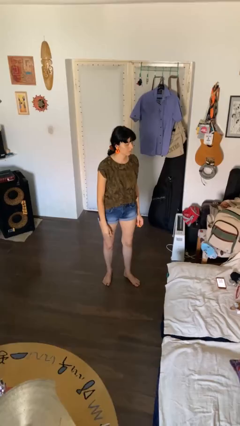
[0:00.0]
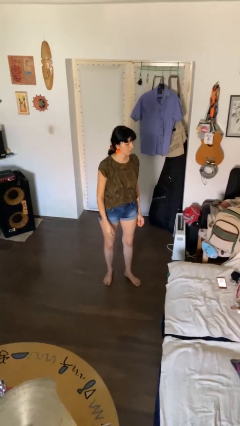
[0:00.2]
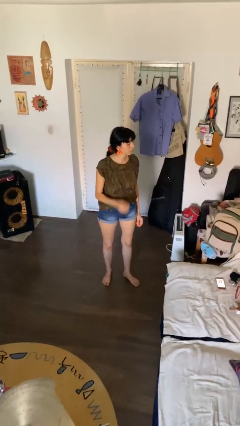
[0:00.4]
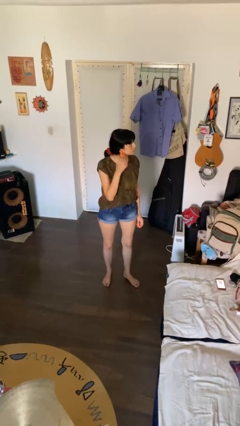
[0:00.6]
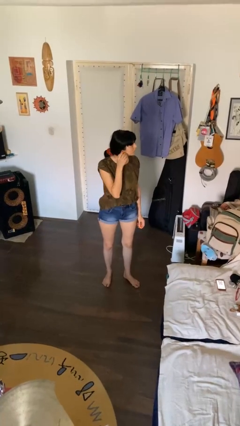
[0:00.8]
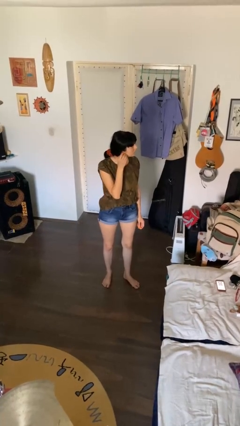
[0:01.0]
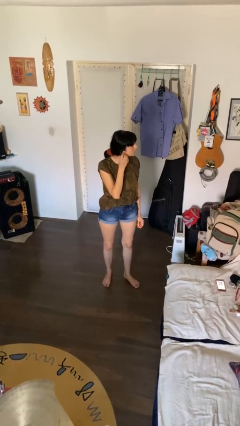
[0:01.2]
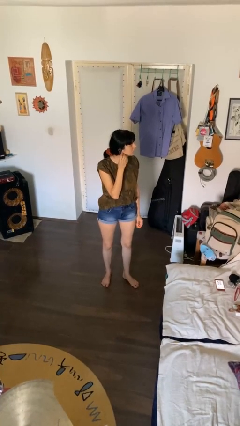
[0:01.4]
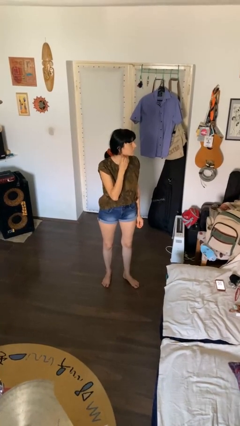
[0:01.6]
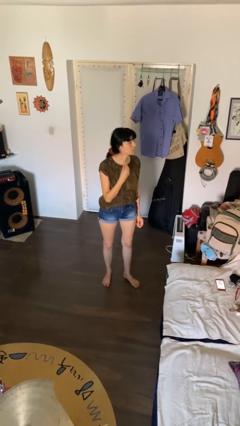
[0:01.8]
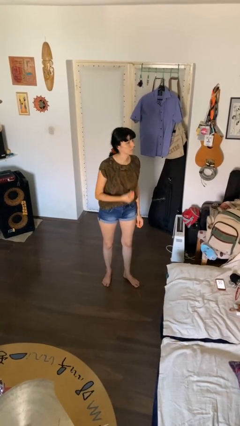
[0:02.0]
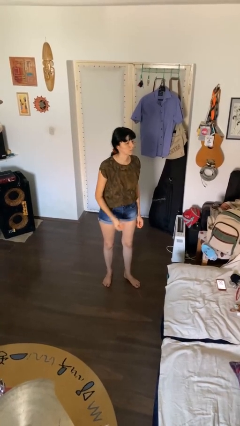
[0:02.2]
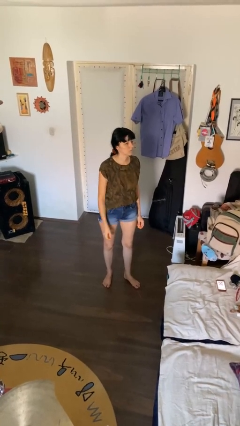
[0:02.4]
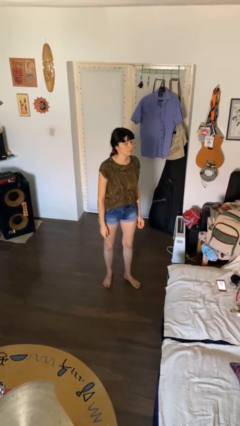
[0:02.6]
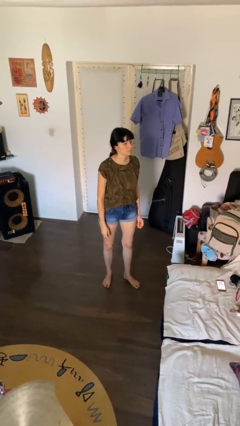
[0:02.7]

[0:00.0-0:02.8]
person takes off earrings

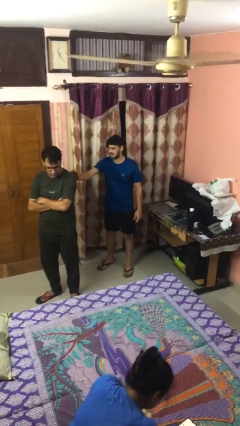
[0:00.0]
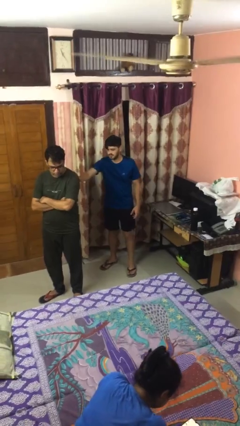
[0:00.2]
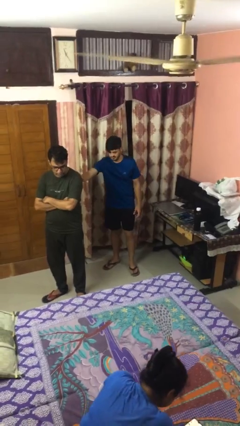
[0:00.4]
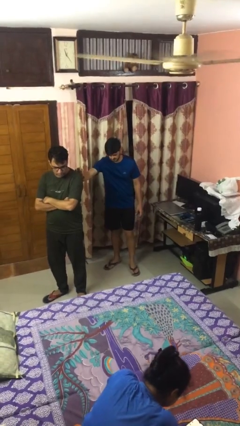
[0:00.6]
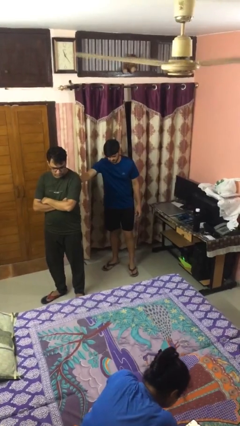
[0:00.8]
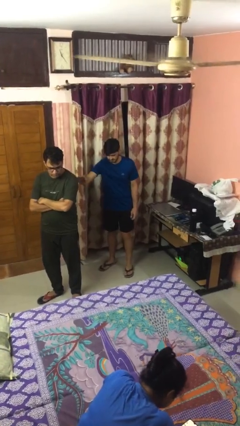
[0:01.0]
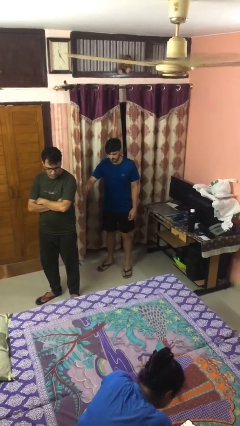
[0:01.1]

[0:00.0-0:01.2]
person touches back of person

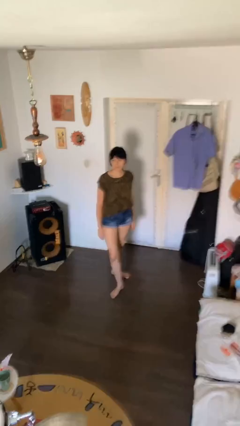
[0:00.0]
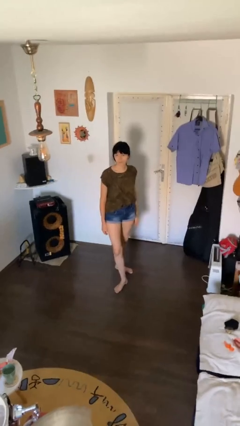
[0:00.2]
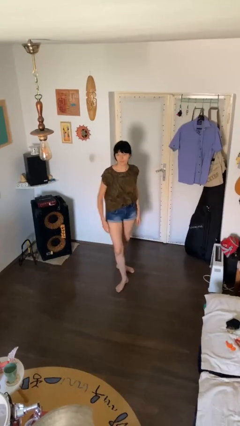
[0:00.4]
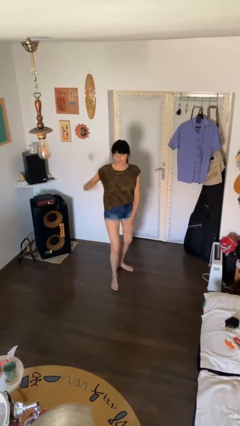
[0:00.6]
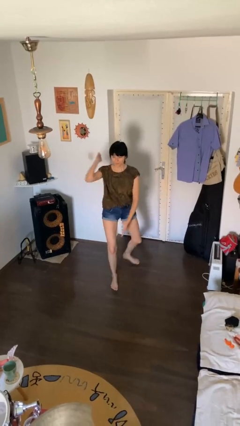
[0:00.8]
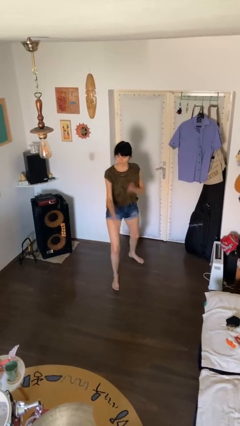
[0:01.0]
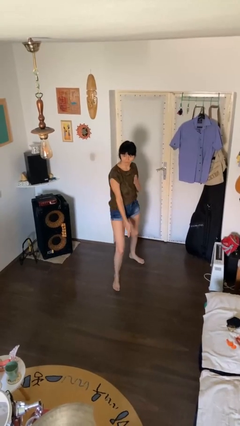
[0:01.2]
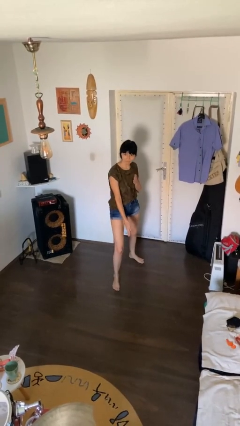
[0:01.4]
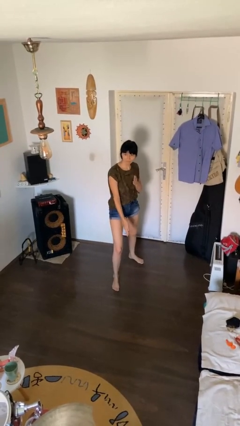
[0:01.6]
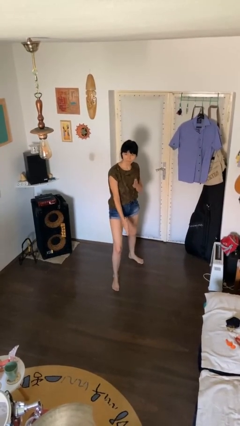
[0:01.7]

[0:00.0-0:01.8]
person karate chop

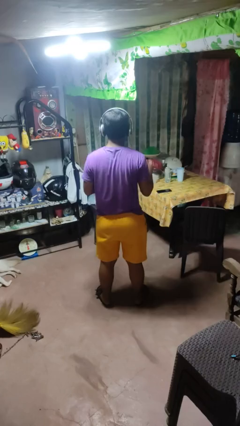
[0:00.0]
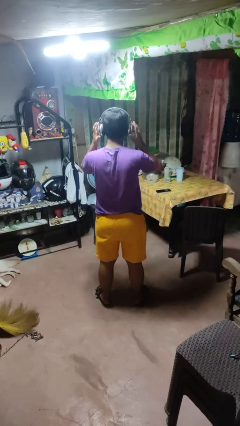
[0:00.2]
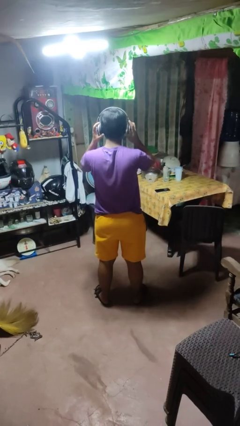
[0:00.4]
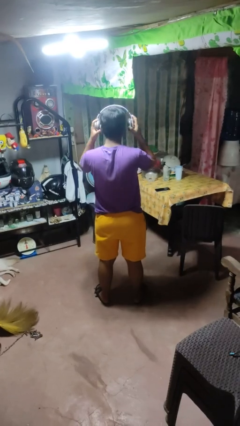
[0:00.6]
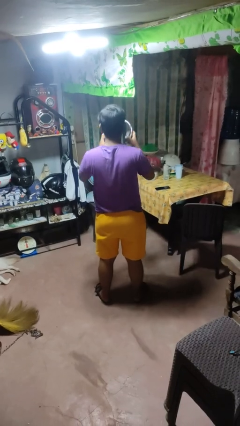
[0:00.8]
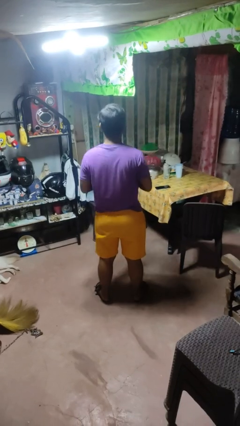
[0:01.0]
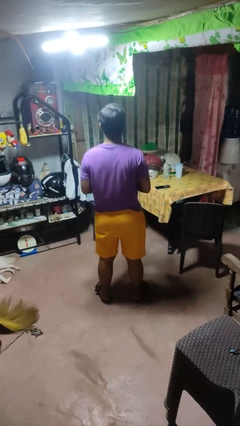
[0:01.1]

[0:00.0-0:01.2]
person takes off headphones

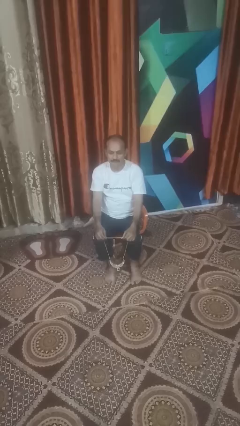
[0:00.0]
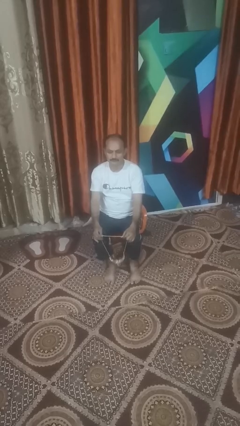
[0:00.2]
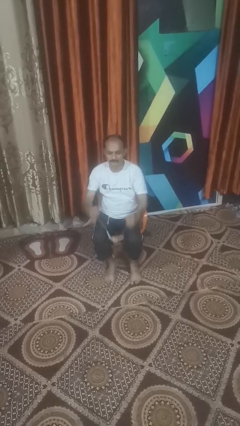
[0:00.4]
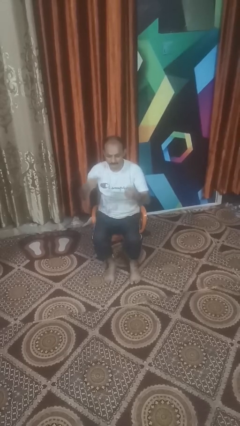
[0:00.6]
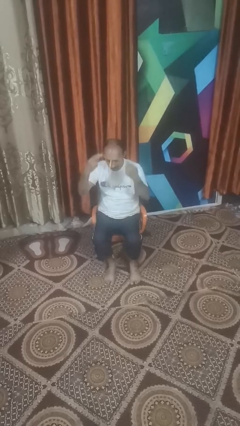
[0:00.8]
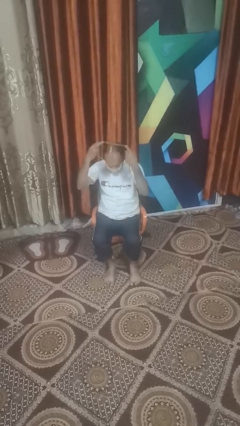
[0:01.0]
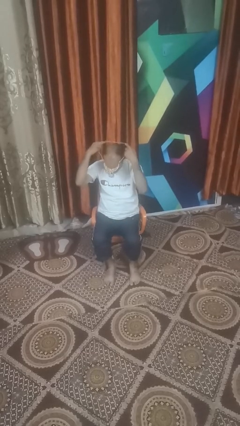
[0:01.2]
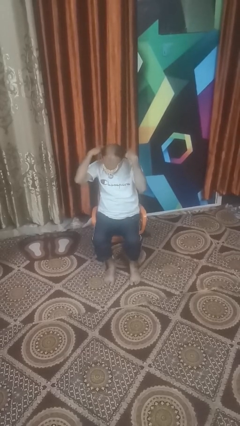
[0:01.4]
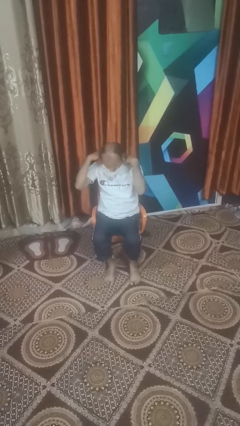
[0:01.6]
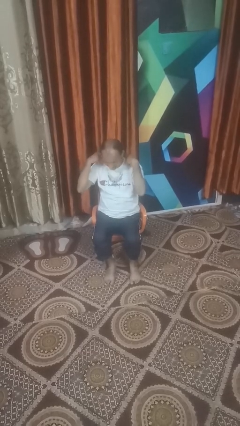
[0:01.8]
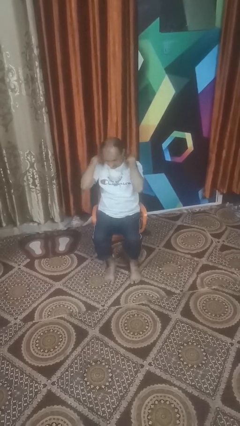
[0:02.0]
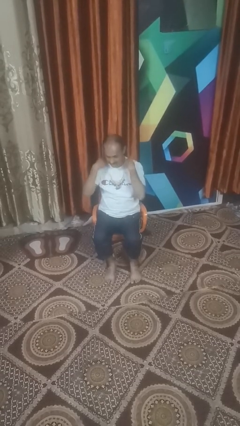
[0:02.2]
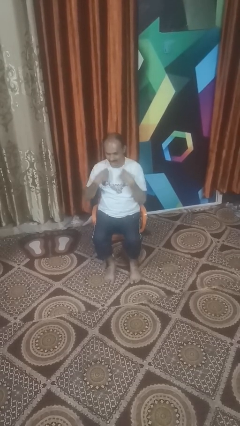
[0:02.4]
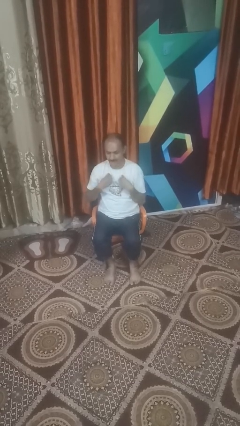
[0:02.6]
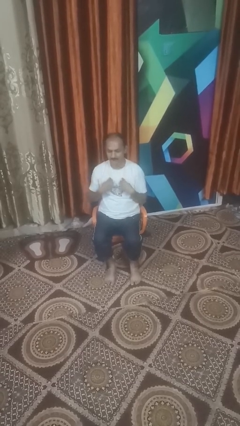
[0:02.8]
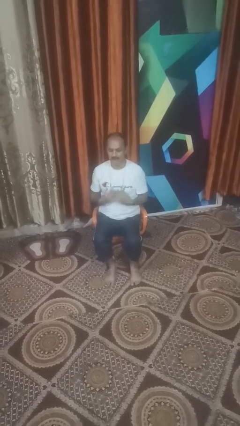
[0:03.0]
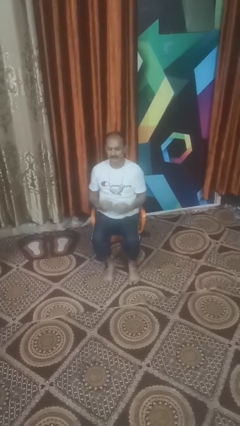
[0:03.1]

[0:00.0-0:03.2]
person puts on necklace

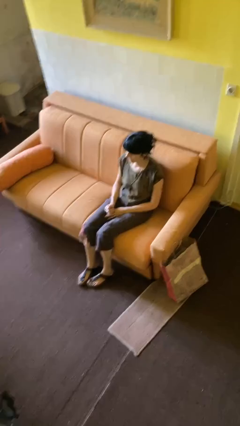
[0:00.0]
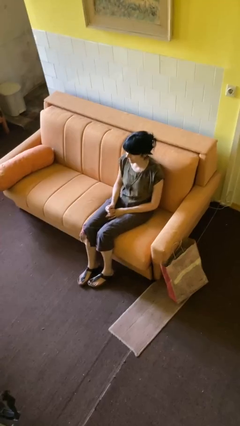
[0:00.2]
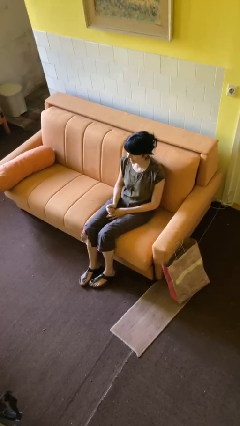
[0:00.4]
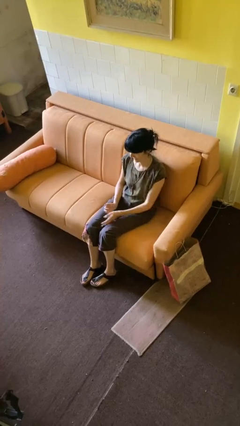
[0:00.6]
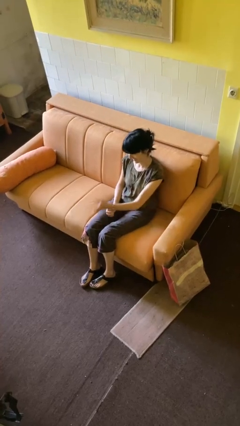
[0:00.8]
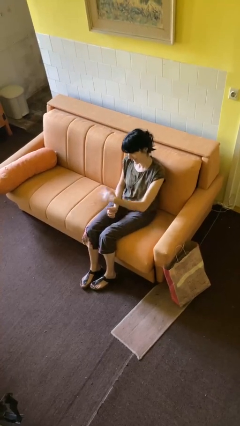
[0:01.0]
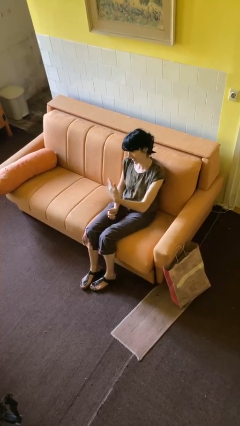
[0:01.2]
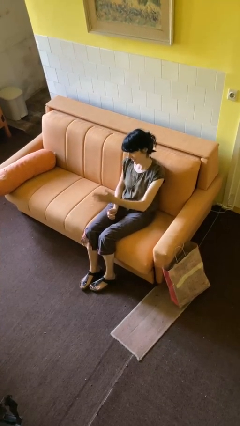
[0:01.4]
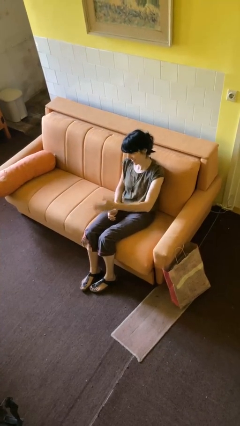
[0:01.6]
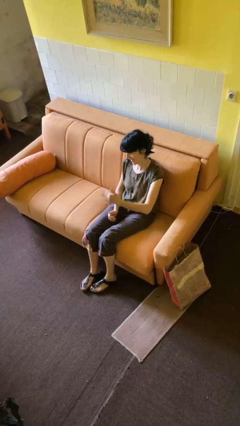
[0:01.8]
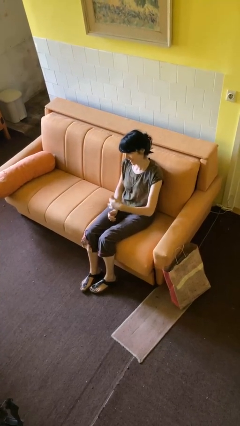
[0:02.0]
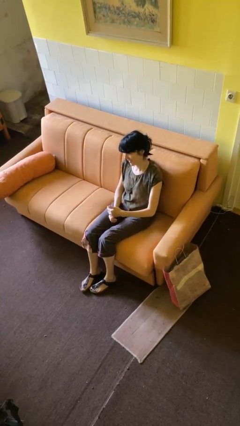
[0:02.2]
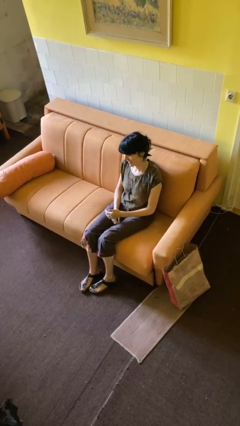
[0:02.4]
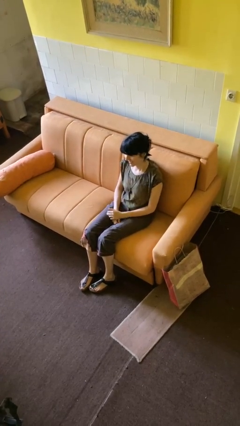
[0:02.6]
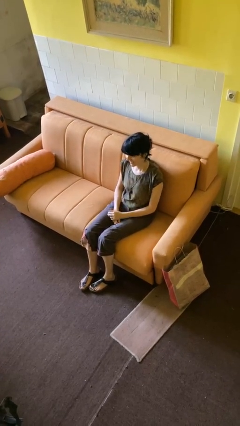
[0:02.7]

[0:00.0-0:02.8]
person gestures come here

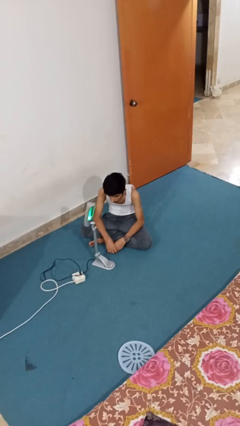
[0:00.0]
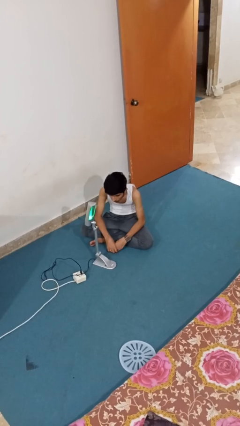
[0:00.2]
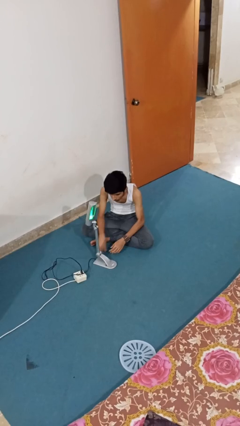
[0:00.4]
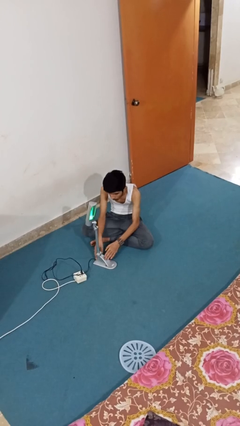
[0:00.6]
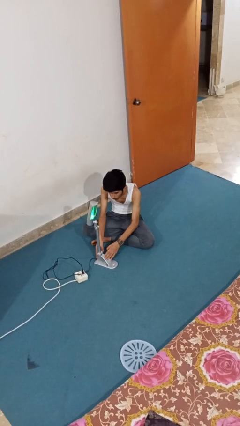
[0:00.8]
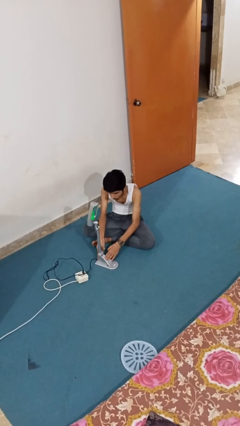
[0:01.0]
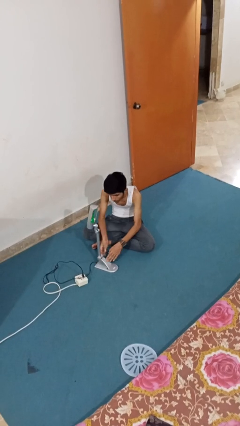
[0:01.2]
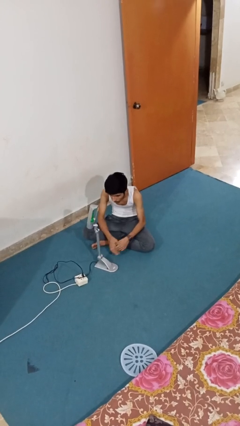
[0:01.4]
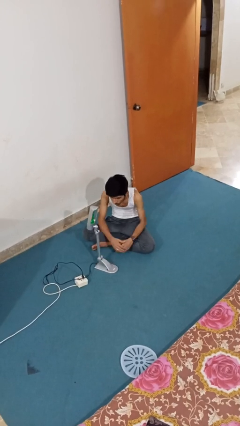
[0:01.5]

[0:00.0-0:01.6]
person turns off lamp

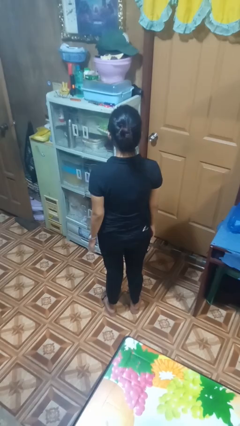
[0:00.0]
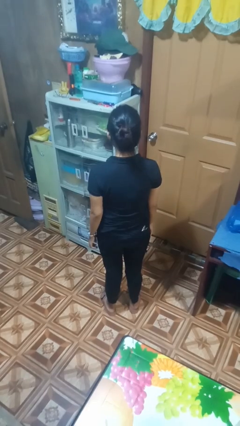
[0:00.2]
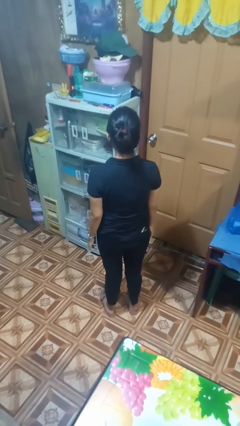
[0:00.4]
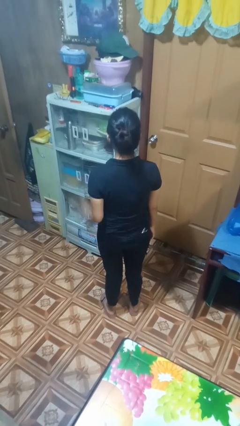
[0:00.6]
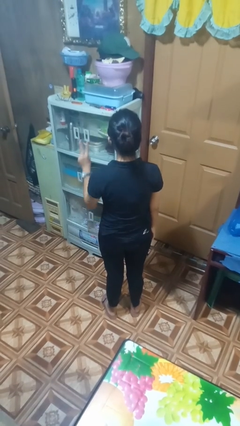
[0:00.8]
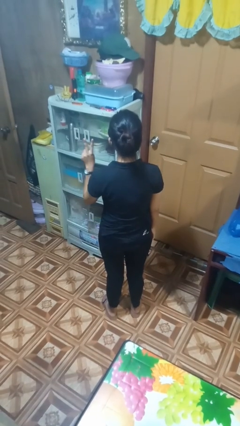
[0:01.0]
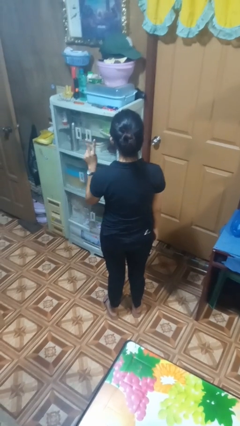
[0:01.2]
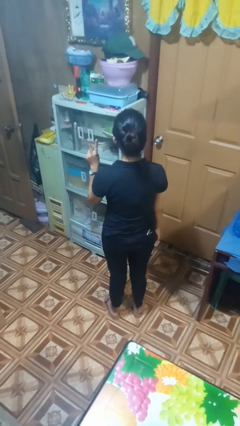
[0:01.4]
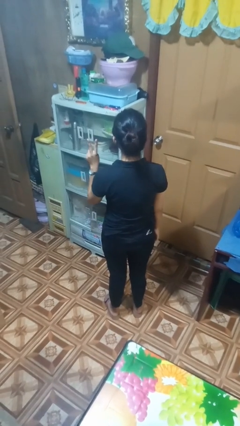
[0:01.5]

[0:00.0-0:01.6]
person gestures peace

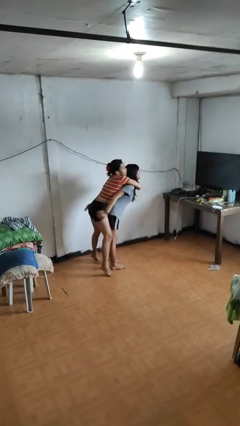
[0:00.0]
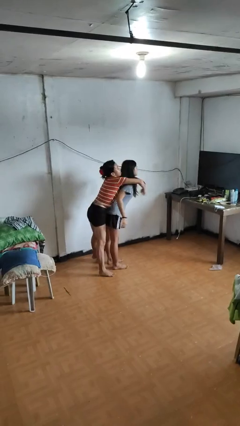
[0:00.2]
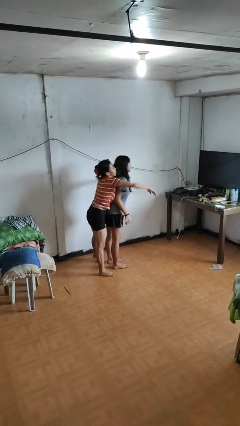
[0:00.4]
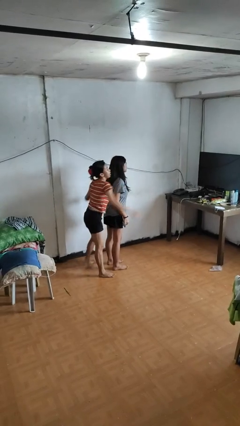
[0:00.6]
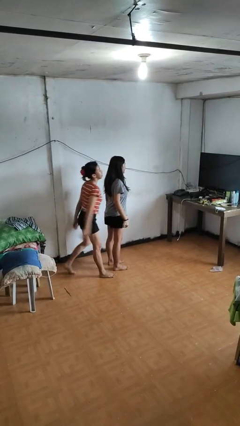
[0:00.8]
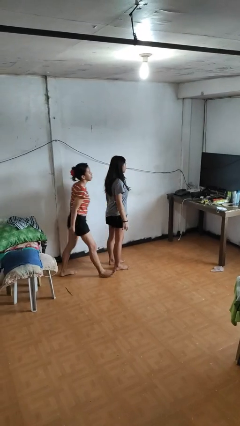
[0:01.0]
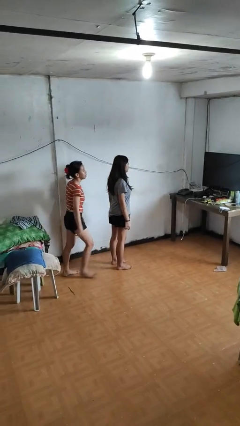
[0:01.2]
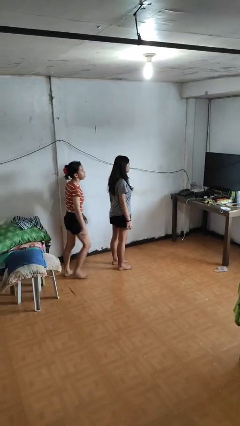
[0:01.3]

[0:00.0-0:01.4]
person puts down person
